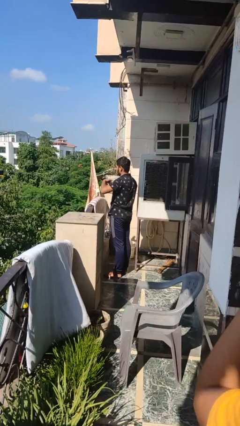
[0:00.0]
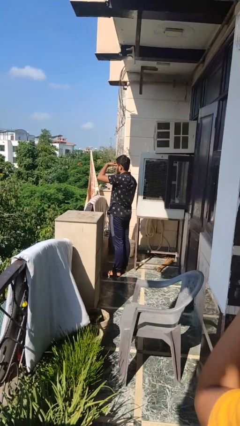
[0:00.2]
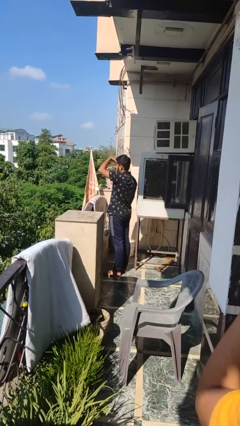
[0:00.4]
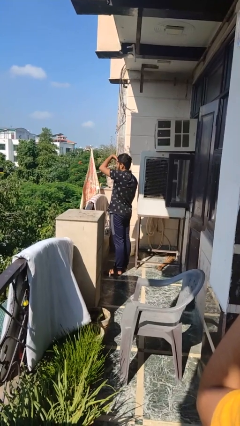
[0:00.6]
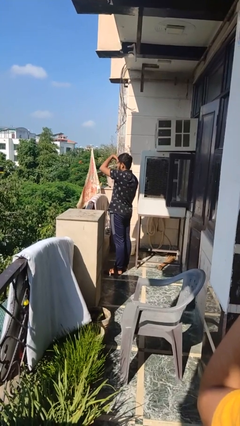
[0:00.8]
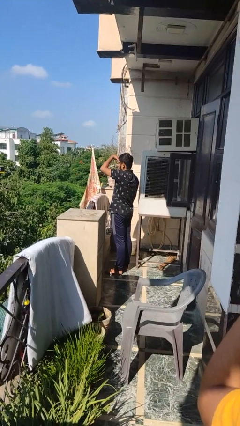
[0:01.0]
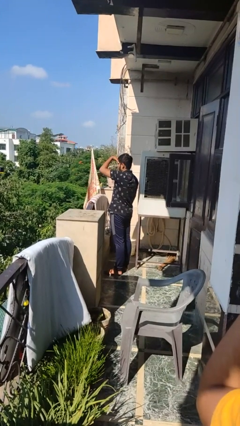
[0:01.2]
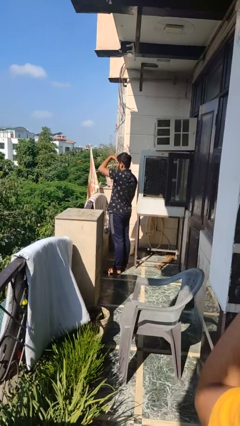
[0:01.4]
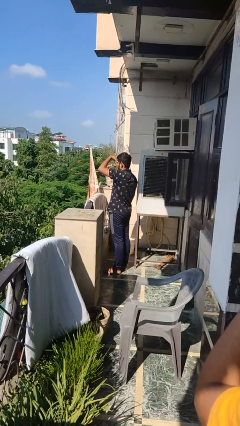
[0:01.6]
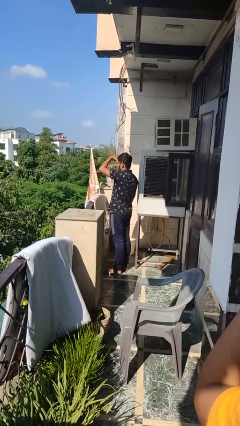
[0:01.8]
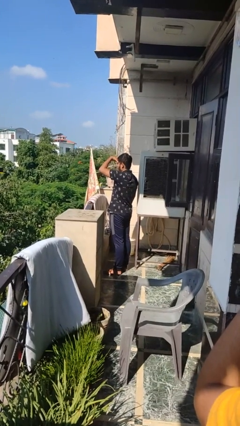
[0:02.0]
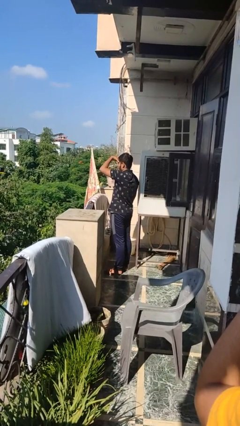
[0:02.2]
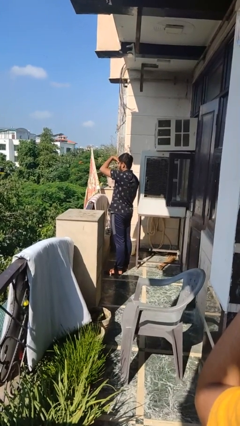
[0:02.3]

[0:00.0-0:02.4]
person shades eyes

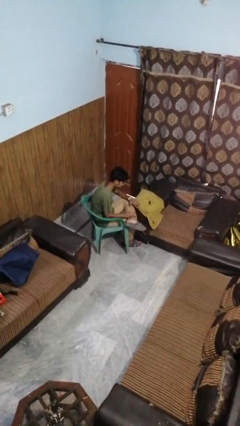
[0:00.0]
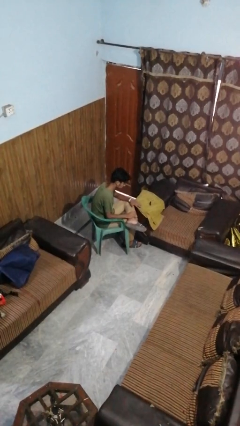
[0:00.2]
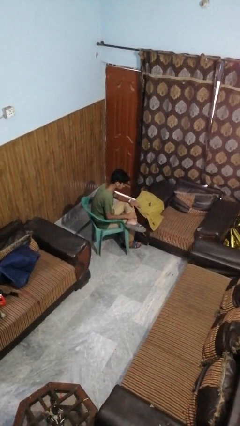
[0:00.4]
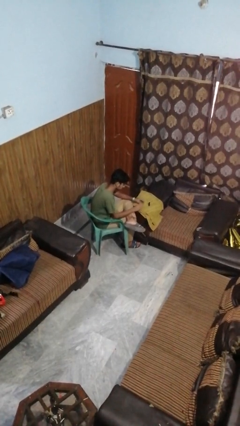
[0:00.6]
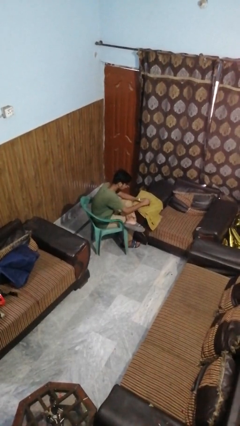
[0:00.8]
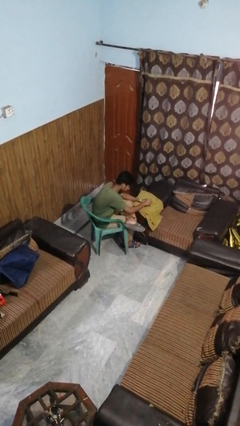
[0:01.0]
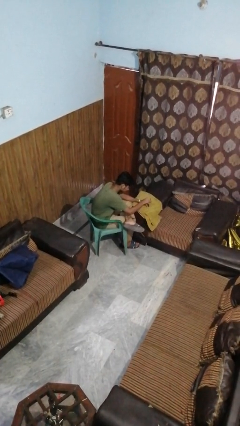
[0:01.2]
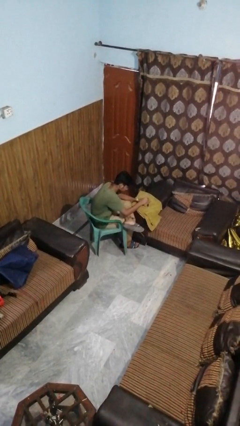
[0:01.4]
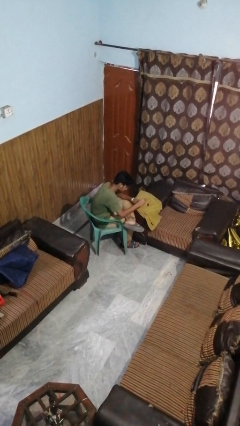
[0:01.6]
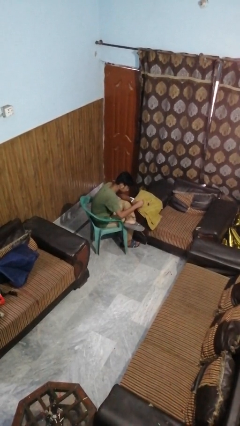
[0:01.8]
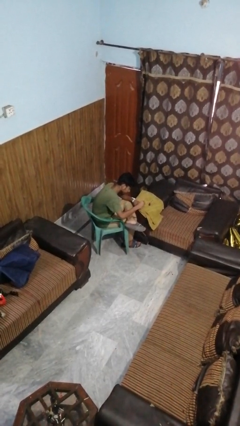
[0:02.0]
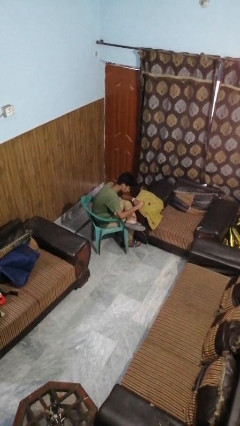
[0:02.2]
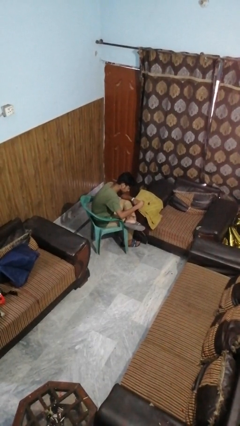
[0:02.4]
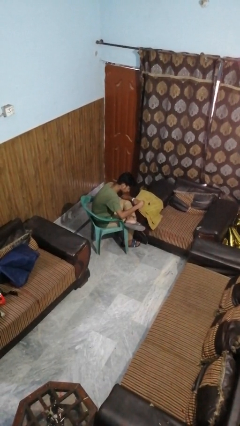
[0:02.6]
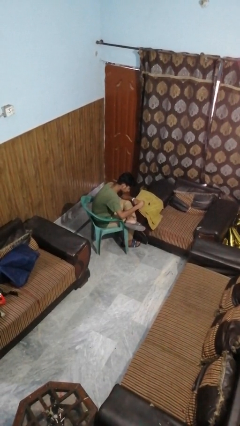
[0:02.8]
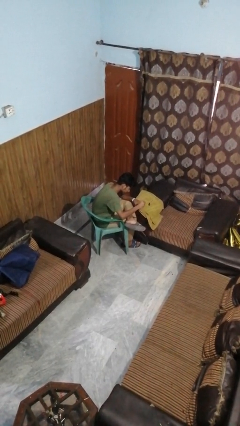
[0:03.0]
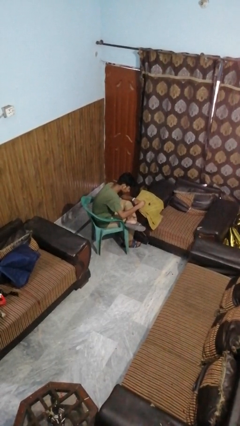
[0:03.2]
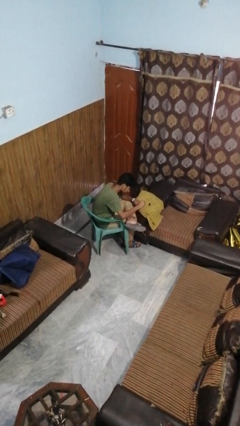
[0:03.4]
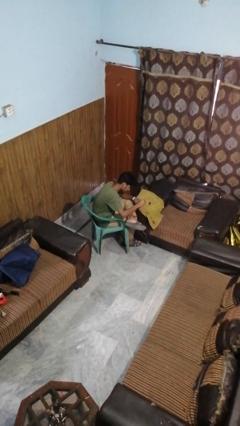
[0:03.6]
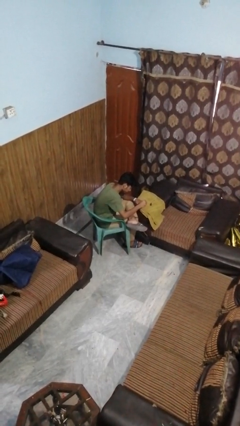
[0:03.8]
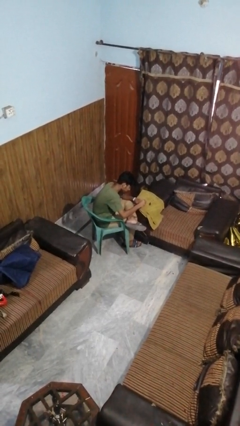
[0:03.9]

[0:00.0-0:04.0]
person paints fingernails

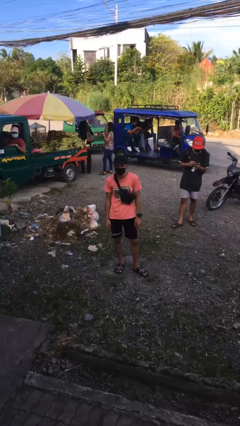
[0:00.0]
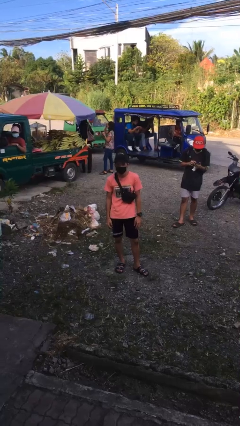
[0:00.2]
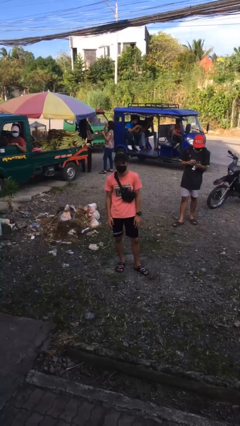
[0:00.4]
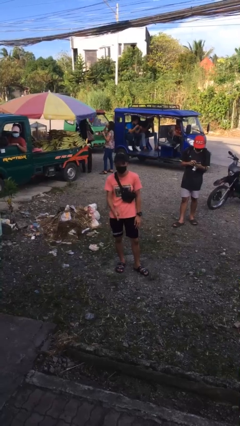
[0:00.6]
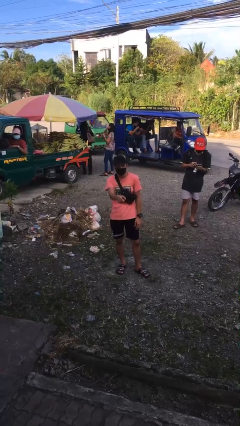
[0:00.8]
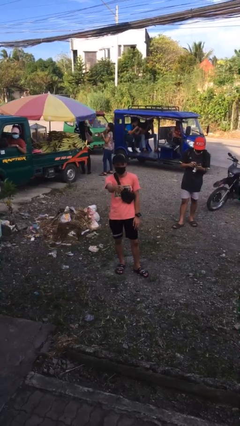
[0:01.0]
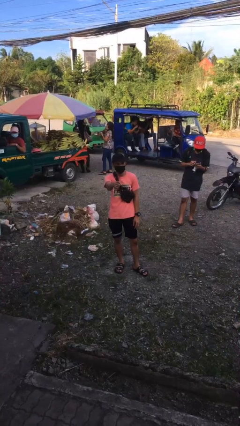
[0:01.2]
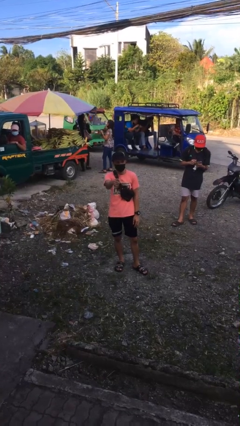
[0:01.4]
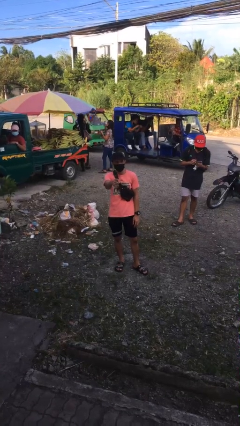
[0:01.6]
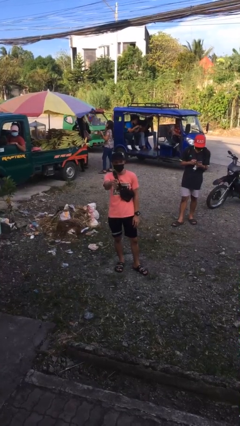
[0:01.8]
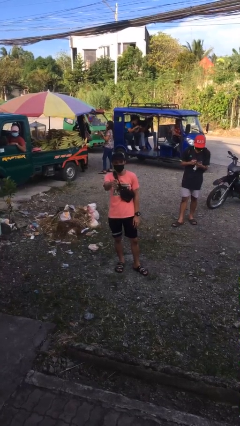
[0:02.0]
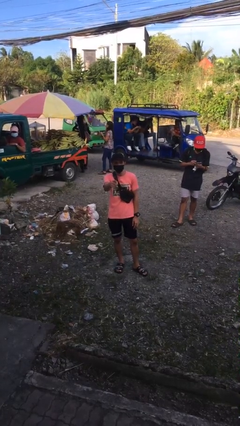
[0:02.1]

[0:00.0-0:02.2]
person points at person

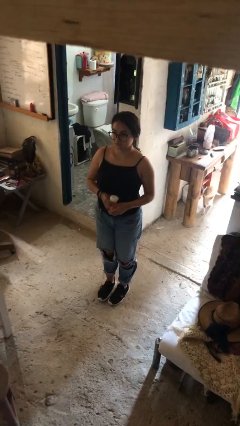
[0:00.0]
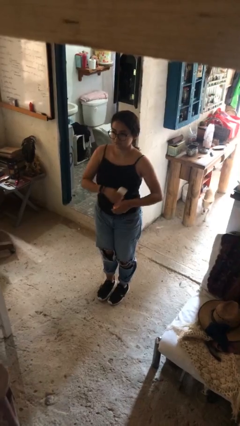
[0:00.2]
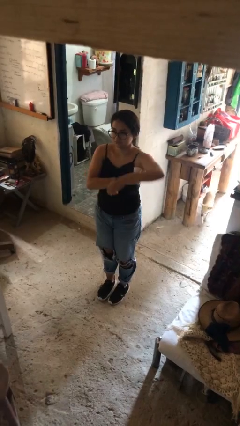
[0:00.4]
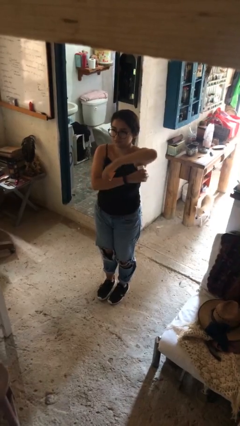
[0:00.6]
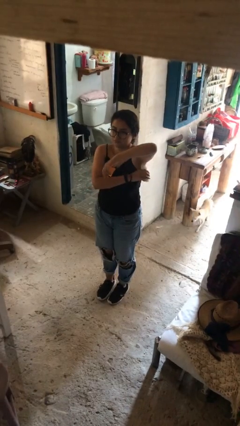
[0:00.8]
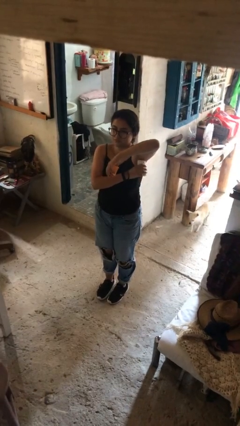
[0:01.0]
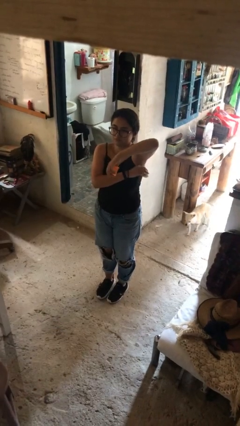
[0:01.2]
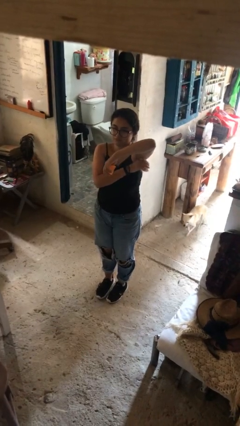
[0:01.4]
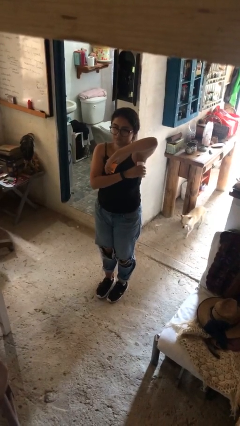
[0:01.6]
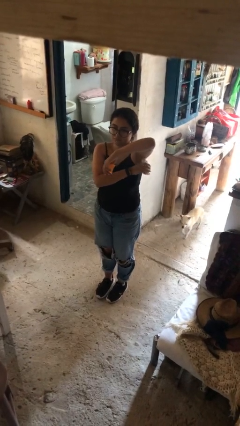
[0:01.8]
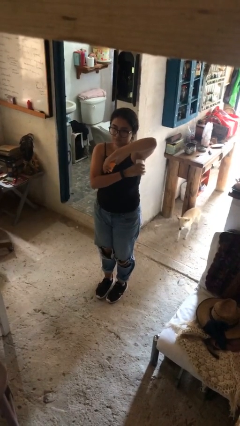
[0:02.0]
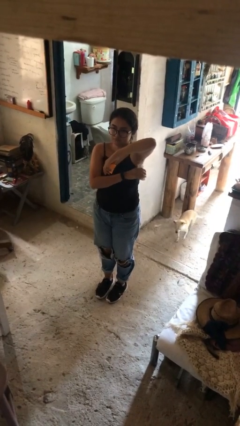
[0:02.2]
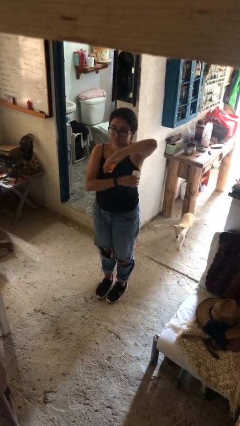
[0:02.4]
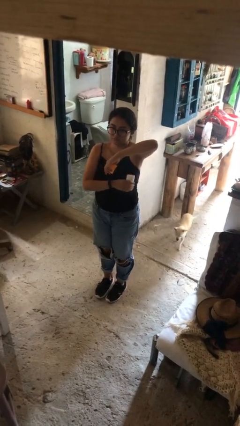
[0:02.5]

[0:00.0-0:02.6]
person applies deodorant

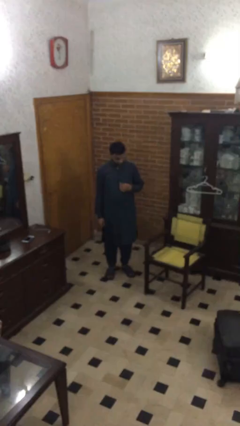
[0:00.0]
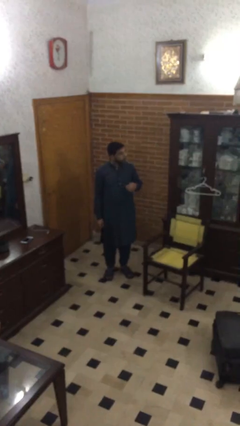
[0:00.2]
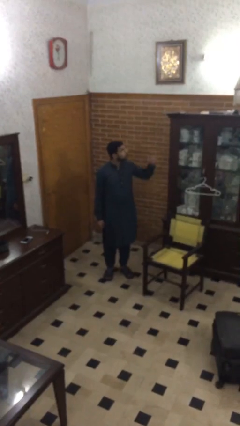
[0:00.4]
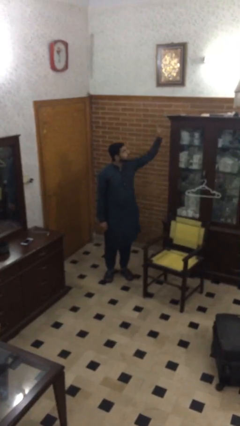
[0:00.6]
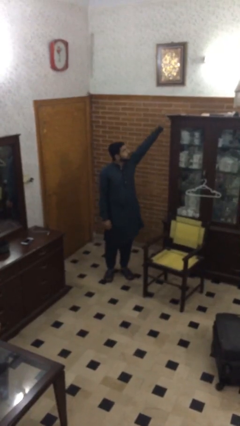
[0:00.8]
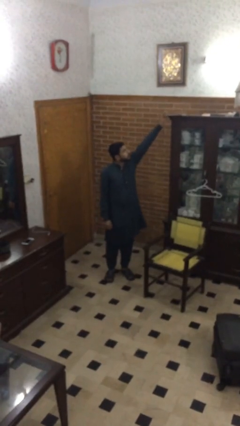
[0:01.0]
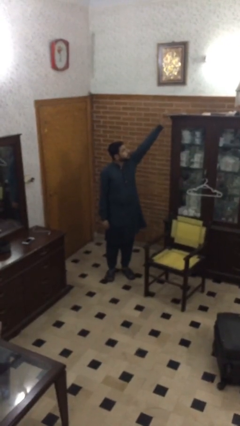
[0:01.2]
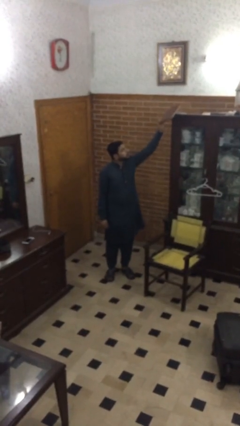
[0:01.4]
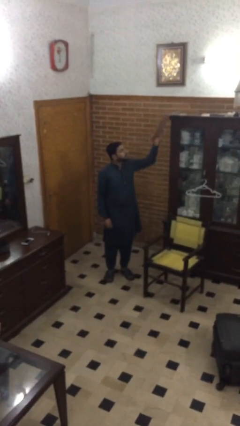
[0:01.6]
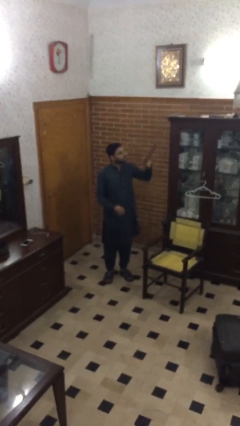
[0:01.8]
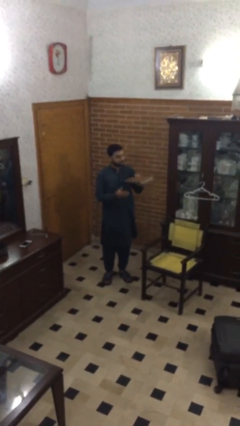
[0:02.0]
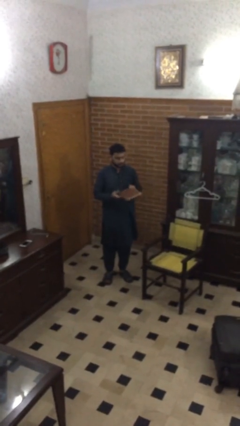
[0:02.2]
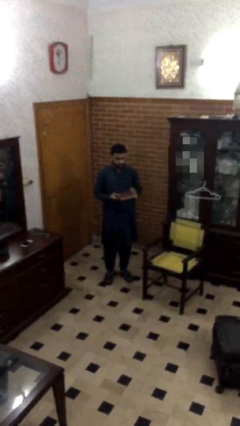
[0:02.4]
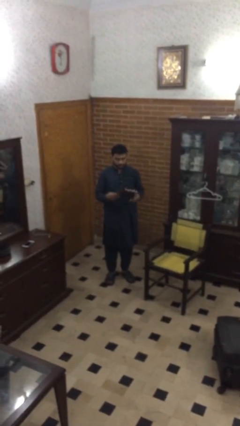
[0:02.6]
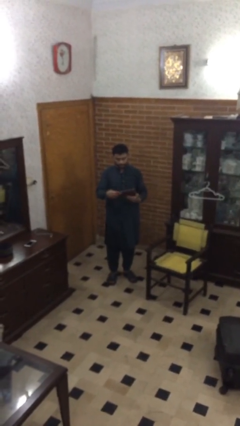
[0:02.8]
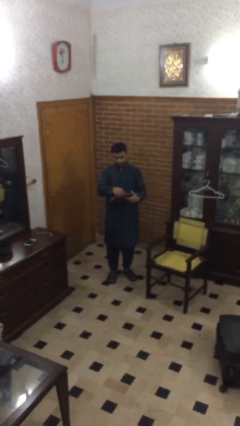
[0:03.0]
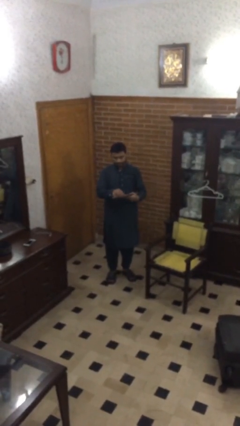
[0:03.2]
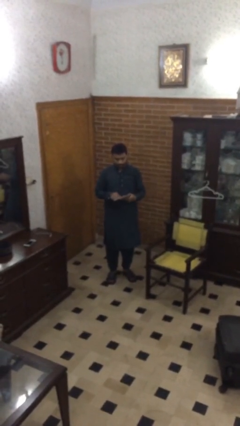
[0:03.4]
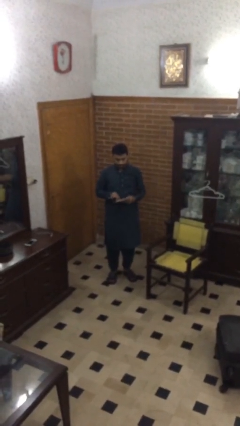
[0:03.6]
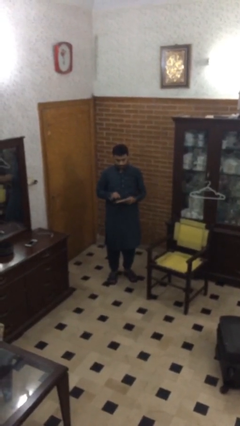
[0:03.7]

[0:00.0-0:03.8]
person picks up object from shelf

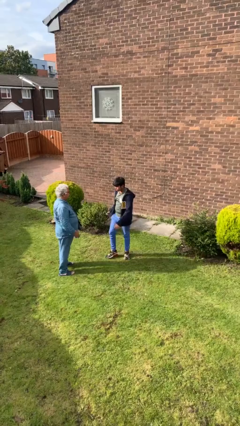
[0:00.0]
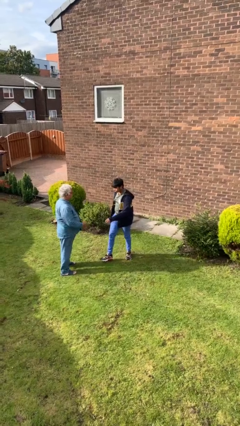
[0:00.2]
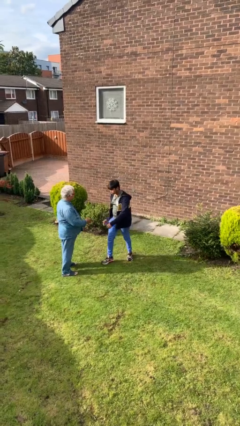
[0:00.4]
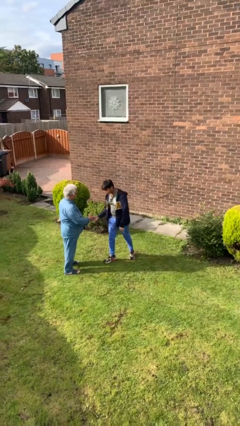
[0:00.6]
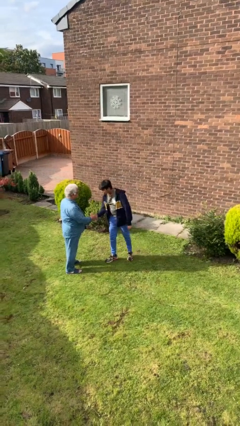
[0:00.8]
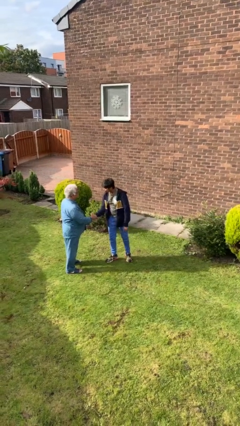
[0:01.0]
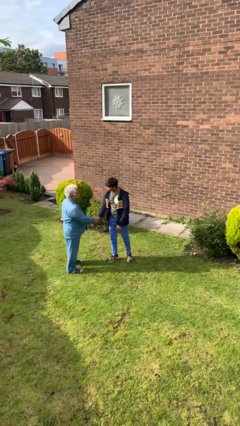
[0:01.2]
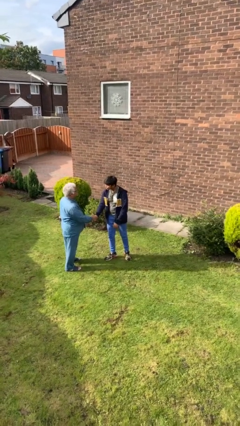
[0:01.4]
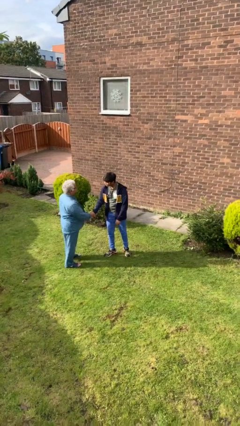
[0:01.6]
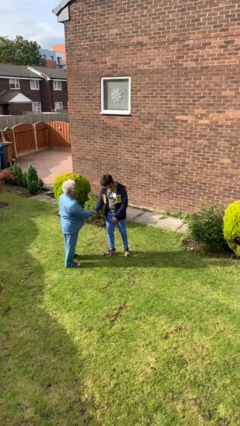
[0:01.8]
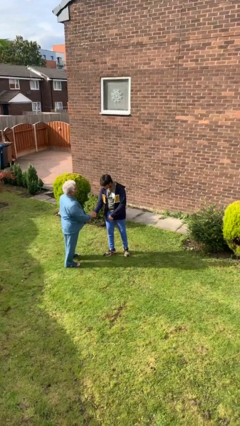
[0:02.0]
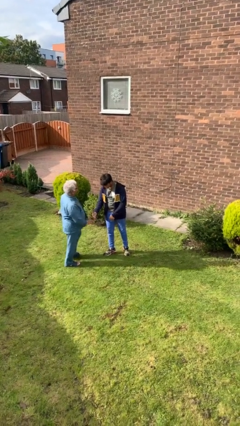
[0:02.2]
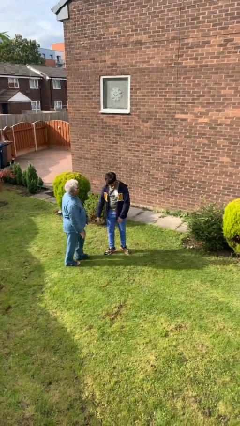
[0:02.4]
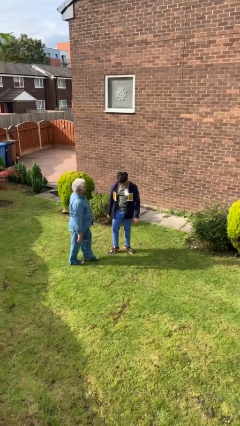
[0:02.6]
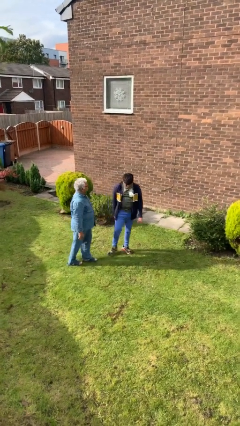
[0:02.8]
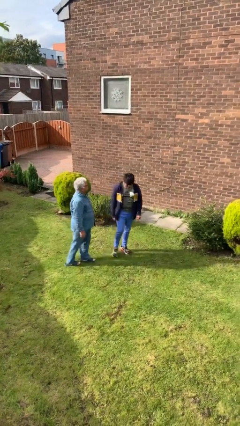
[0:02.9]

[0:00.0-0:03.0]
person shakes hand
